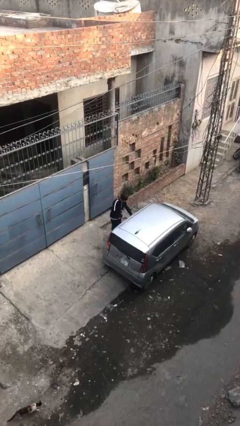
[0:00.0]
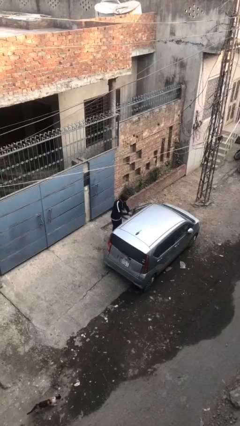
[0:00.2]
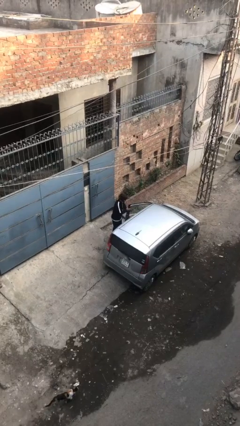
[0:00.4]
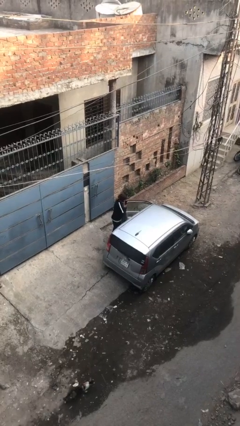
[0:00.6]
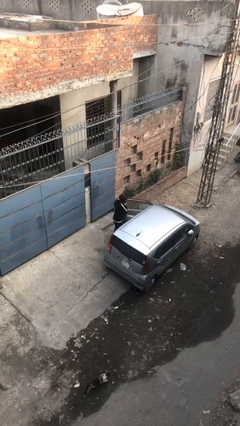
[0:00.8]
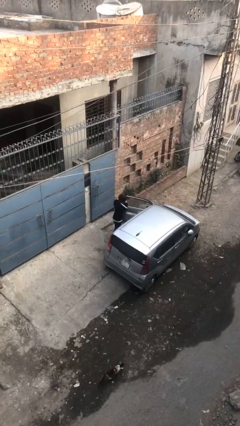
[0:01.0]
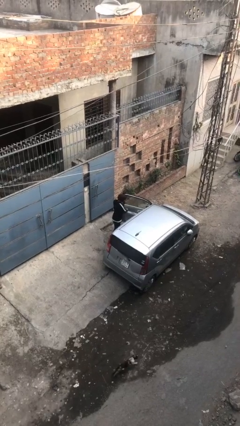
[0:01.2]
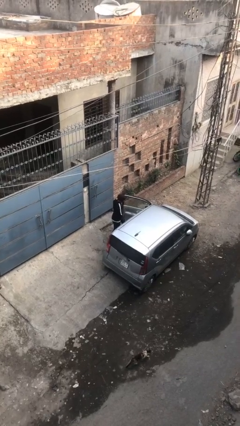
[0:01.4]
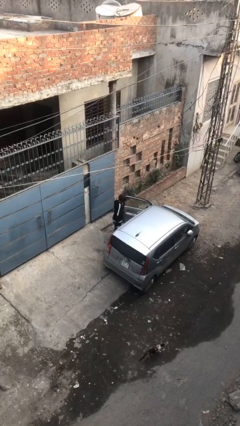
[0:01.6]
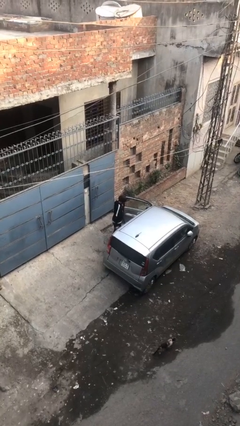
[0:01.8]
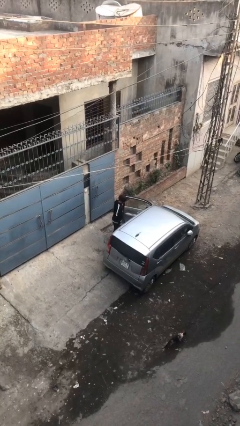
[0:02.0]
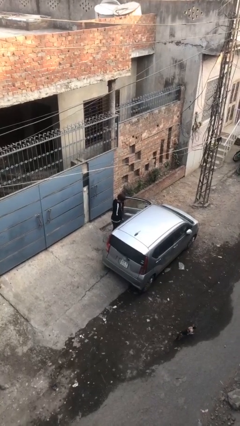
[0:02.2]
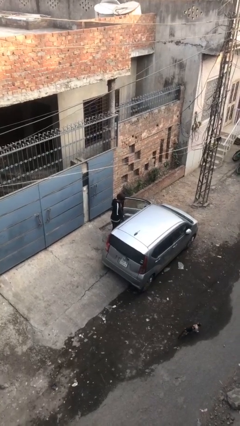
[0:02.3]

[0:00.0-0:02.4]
person opens car door

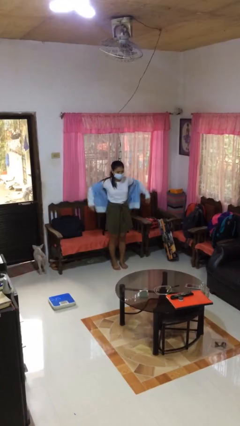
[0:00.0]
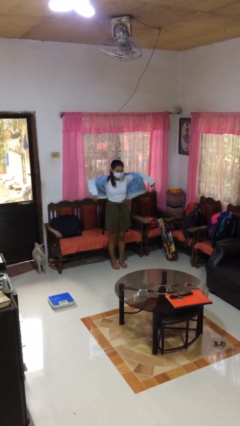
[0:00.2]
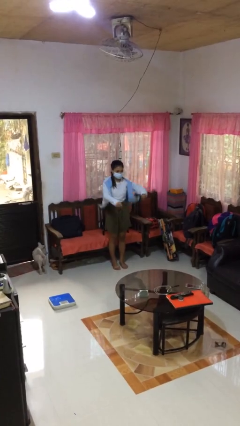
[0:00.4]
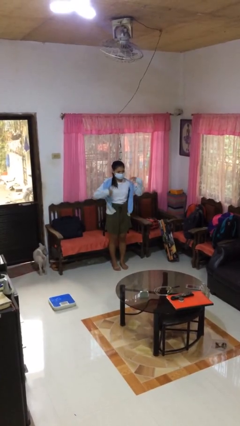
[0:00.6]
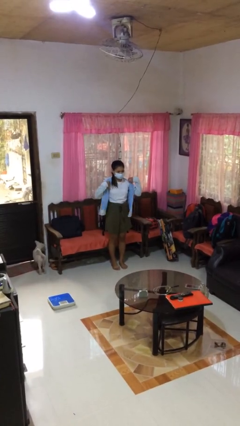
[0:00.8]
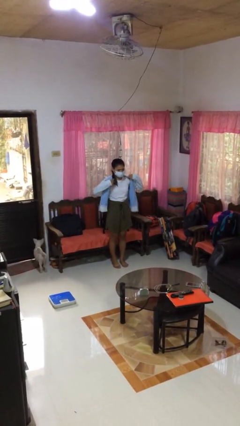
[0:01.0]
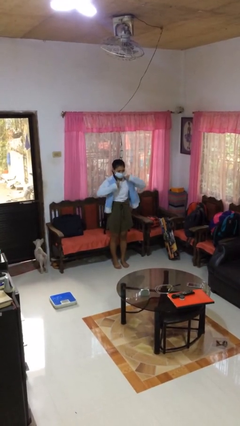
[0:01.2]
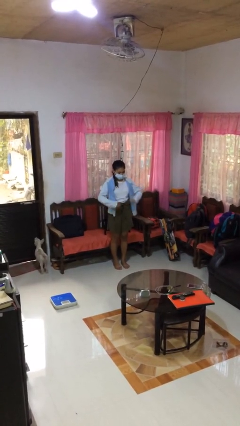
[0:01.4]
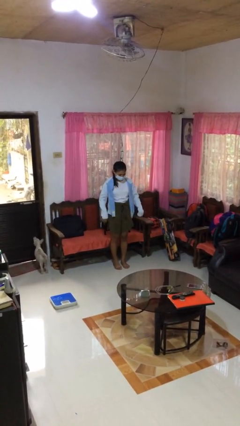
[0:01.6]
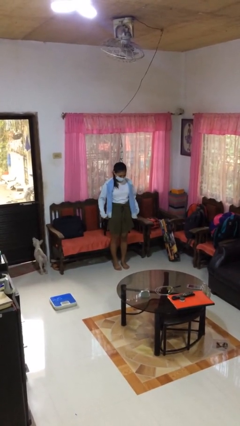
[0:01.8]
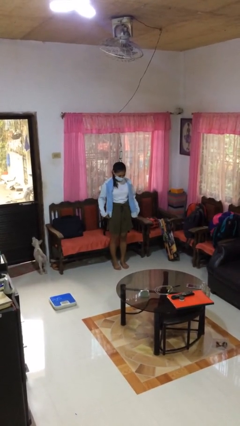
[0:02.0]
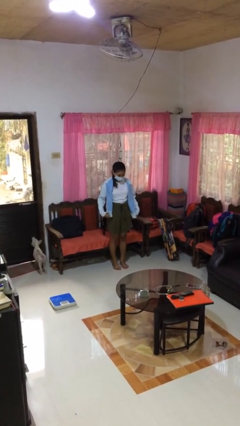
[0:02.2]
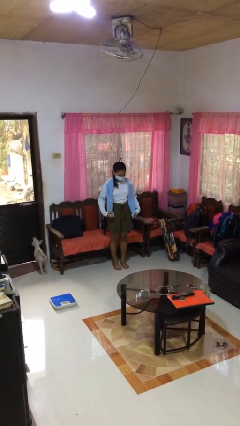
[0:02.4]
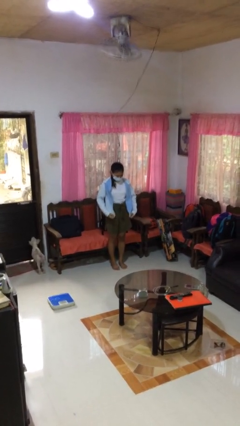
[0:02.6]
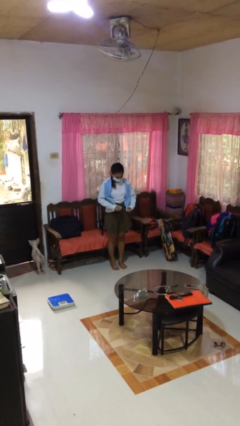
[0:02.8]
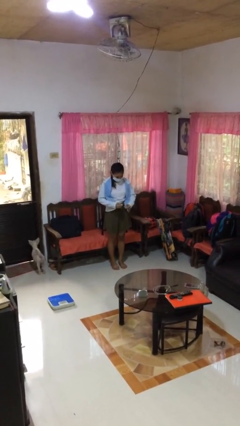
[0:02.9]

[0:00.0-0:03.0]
person puts on jacket

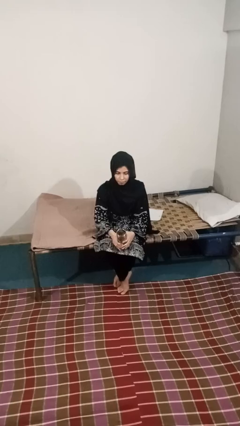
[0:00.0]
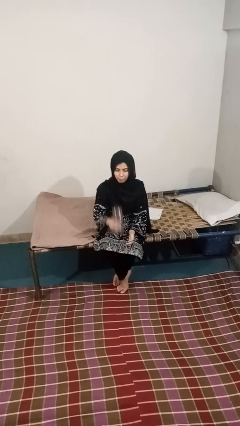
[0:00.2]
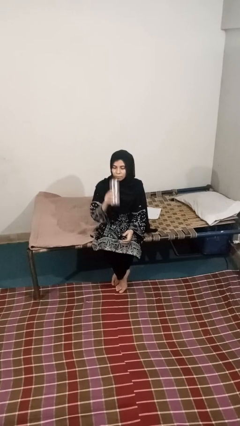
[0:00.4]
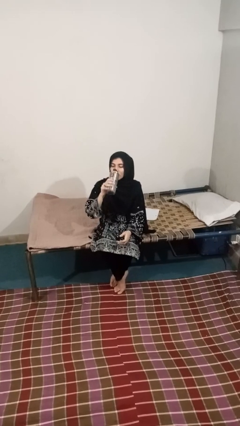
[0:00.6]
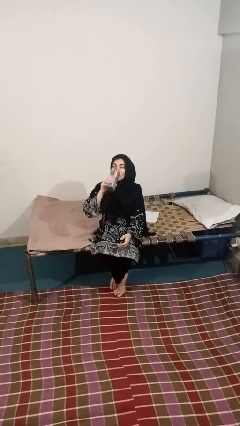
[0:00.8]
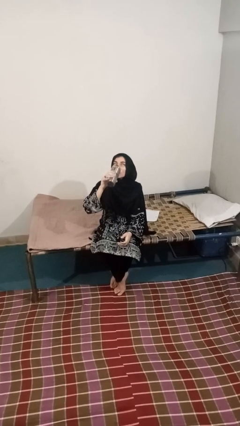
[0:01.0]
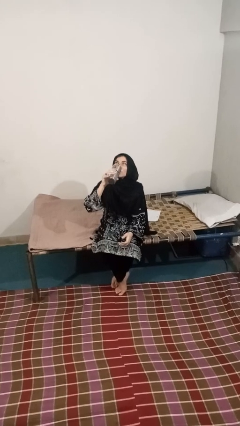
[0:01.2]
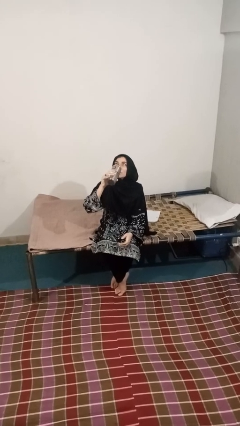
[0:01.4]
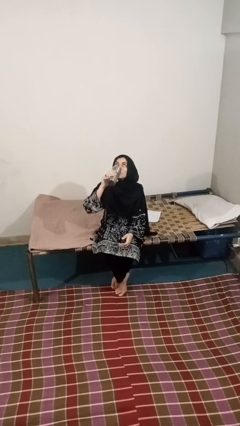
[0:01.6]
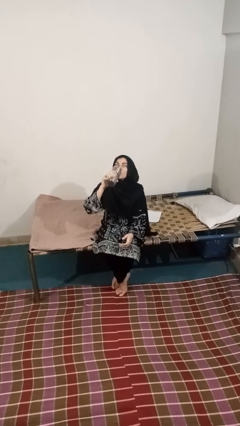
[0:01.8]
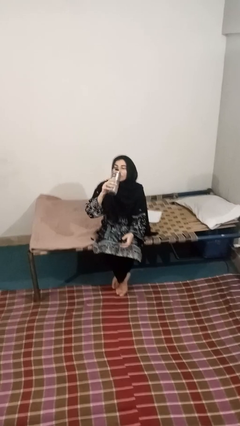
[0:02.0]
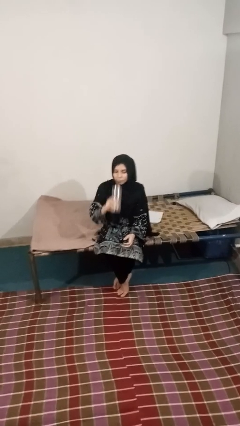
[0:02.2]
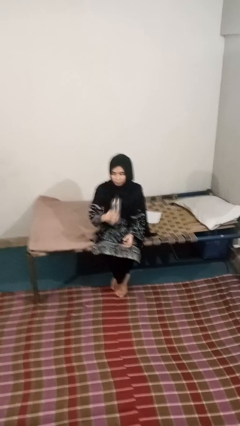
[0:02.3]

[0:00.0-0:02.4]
person drinks from beverage can

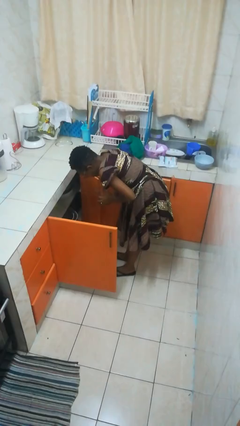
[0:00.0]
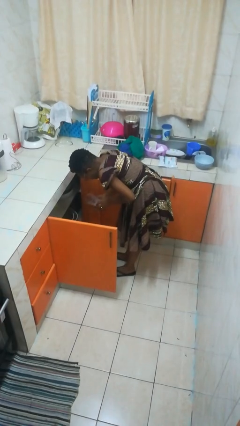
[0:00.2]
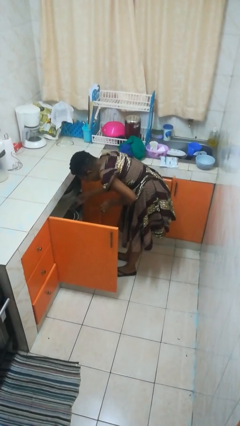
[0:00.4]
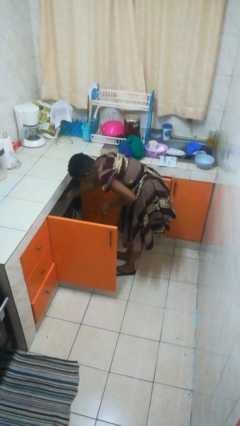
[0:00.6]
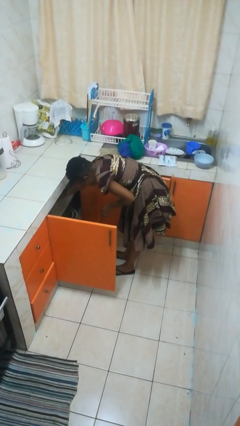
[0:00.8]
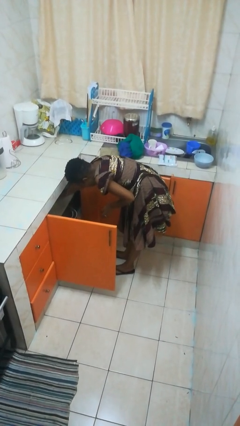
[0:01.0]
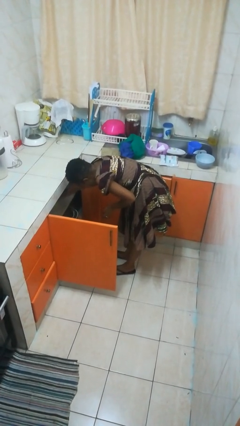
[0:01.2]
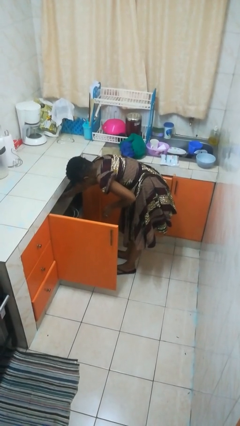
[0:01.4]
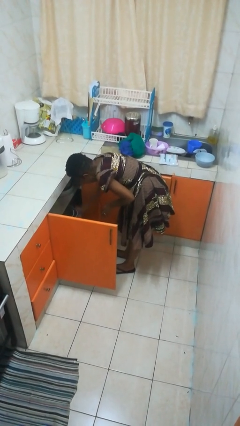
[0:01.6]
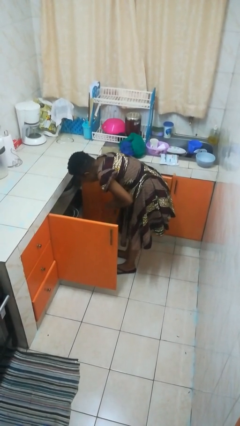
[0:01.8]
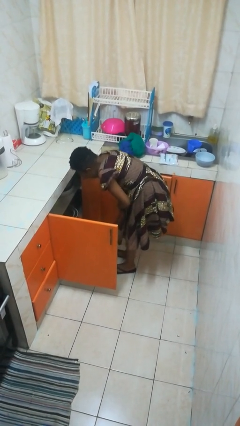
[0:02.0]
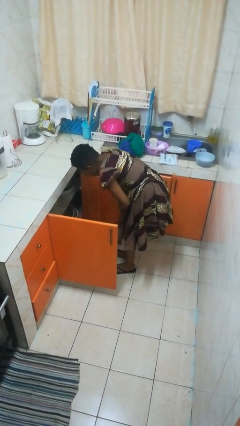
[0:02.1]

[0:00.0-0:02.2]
person puts object in cabinet

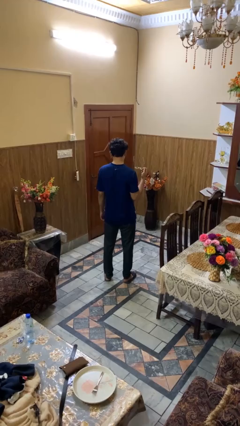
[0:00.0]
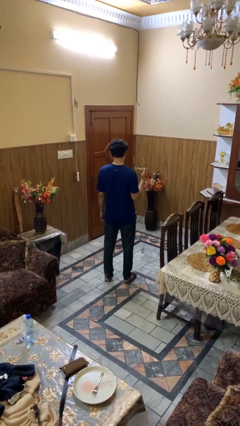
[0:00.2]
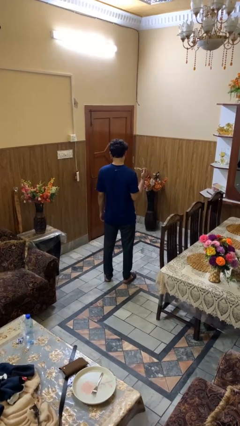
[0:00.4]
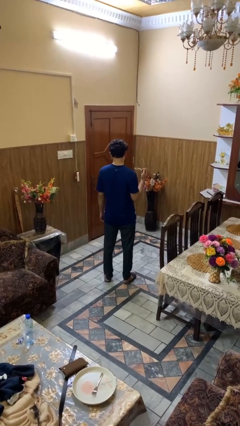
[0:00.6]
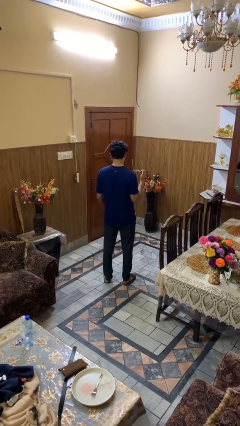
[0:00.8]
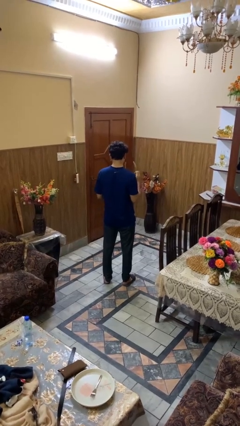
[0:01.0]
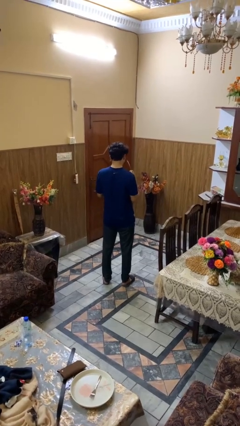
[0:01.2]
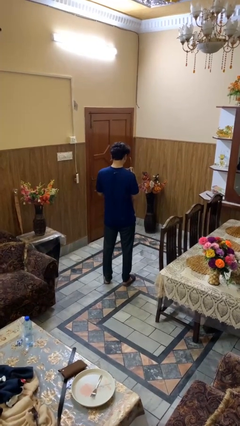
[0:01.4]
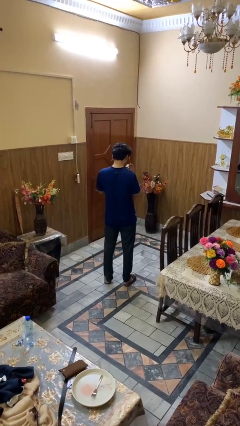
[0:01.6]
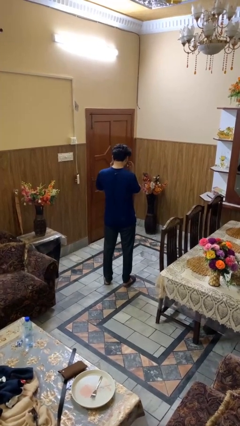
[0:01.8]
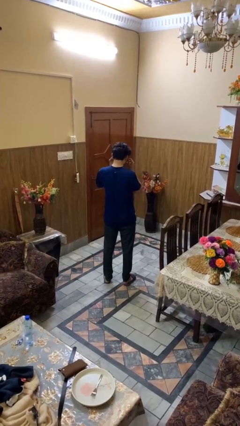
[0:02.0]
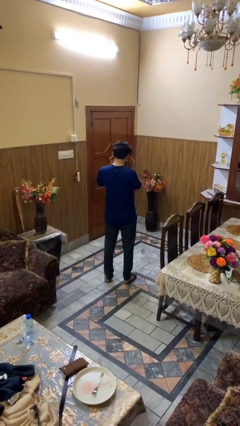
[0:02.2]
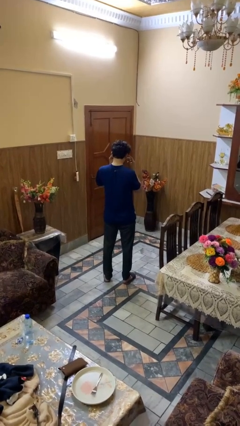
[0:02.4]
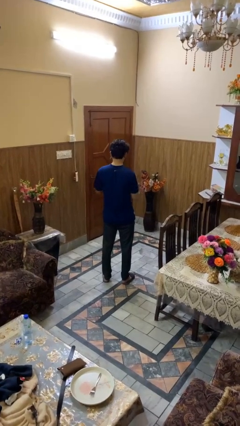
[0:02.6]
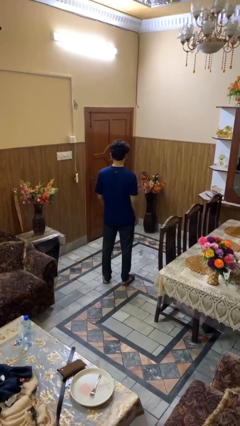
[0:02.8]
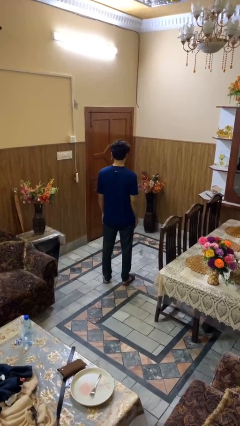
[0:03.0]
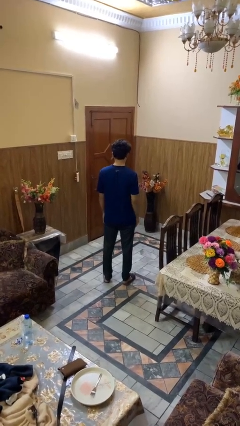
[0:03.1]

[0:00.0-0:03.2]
person puts on sunglasses

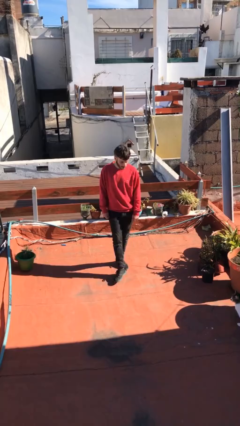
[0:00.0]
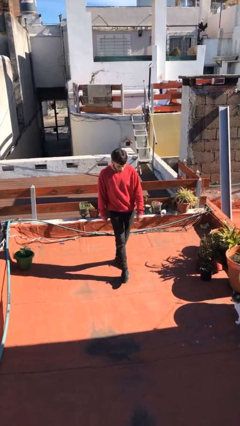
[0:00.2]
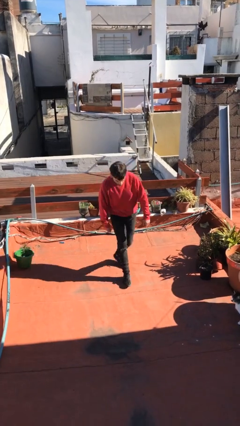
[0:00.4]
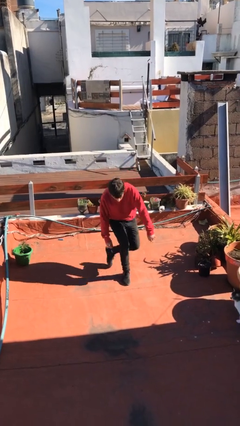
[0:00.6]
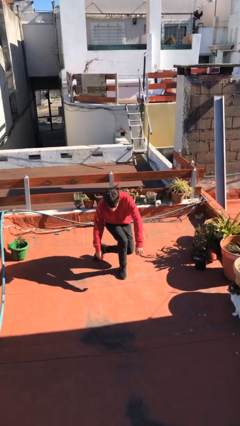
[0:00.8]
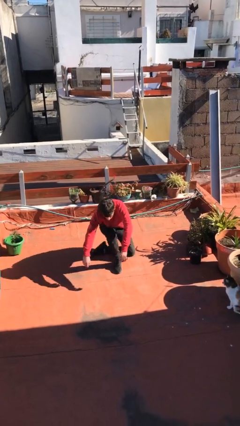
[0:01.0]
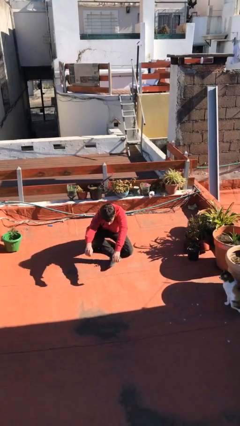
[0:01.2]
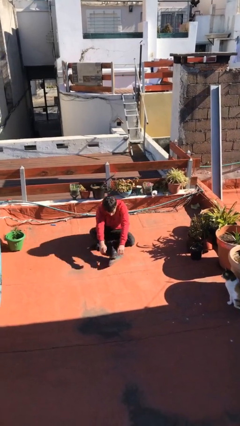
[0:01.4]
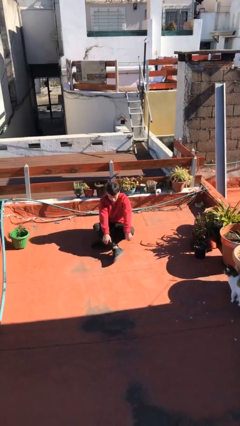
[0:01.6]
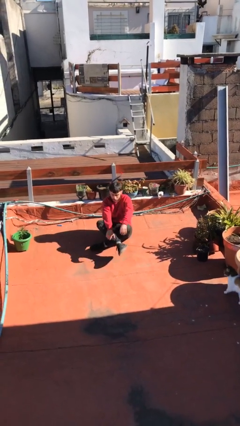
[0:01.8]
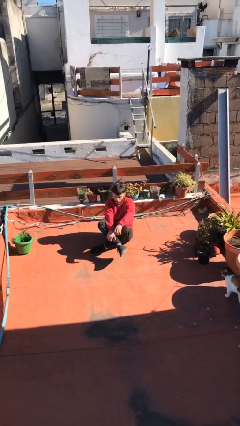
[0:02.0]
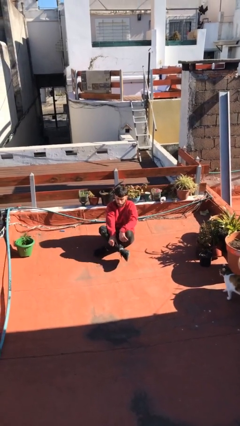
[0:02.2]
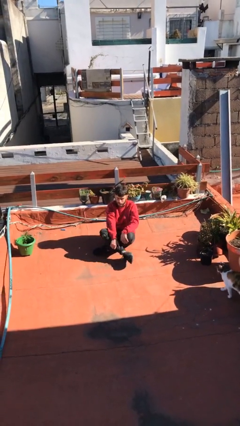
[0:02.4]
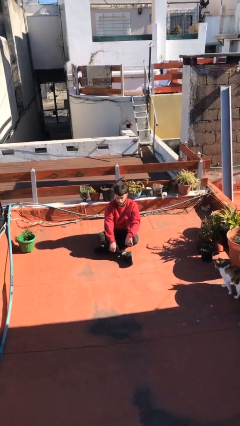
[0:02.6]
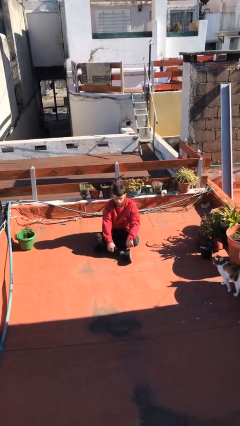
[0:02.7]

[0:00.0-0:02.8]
person sits crisscross

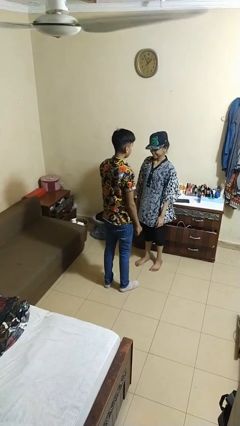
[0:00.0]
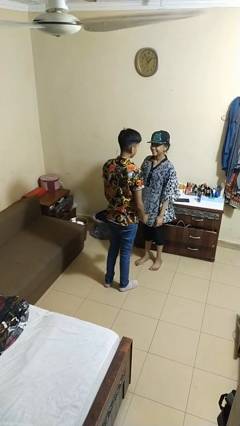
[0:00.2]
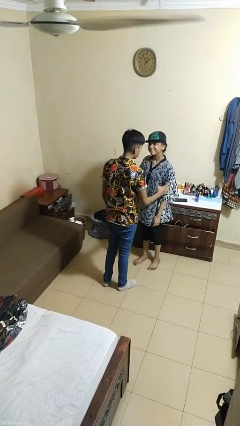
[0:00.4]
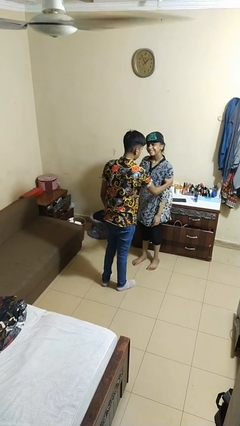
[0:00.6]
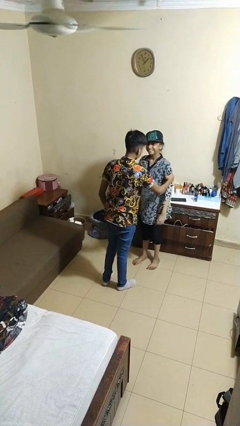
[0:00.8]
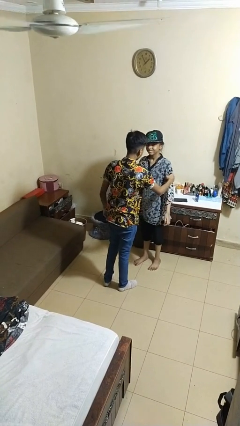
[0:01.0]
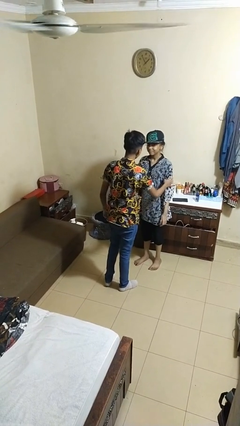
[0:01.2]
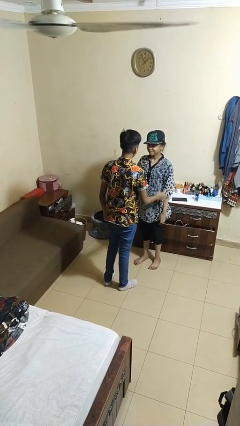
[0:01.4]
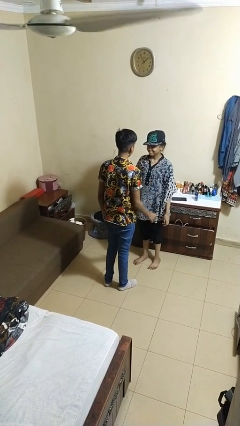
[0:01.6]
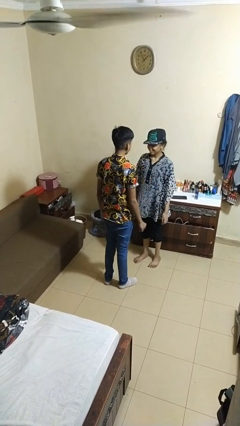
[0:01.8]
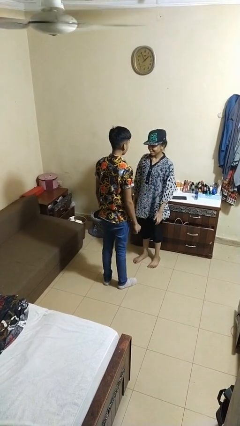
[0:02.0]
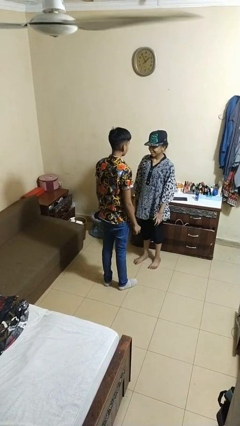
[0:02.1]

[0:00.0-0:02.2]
person grabs person by bicep
